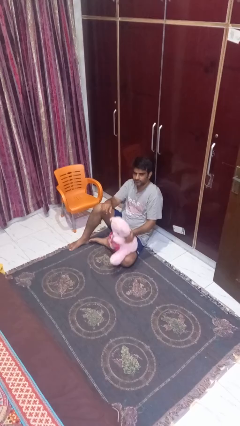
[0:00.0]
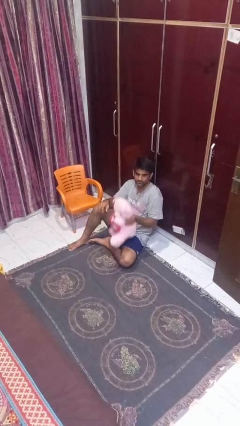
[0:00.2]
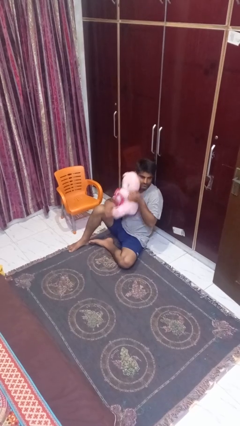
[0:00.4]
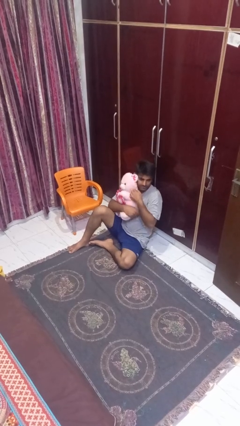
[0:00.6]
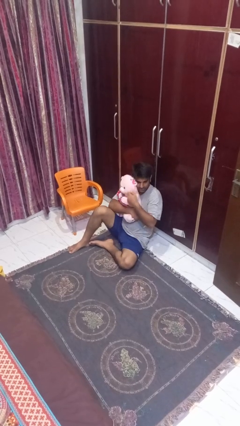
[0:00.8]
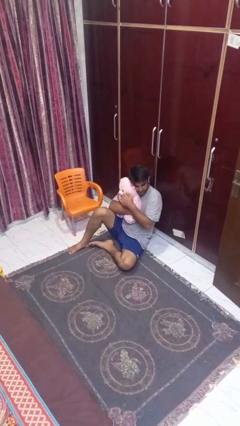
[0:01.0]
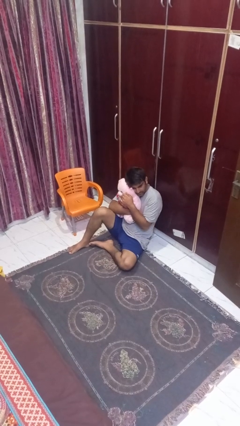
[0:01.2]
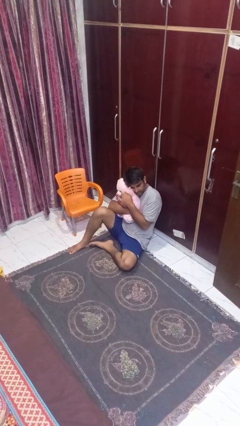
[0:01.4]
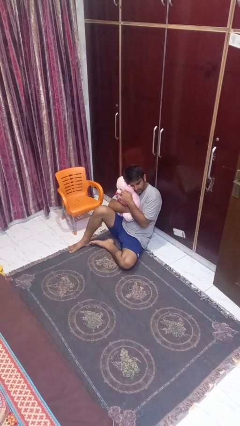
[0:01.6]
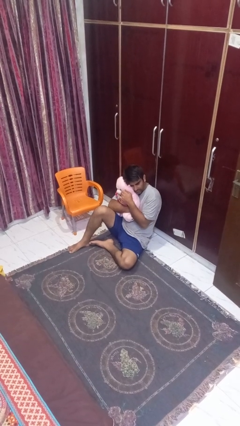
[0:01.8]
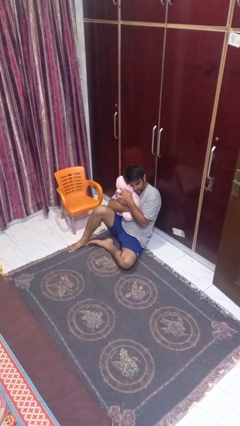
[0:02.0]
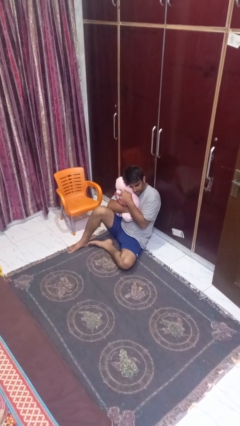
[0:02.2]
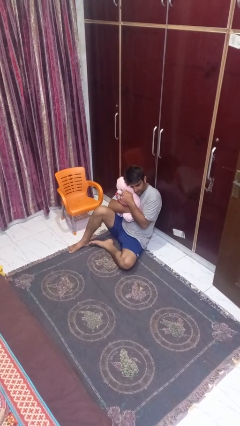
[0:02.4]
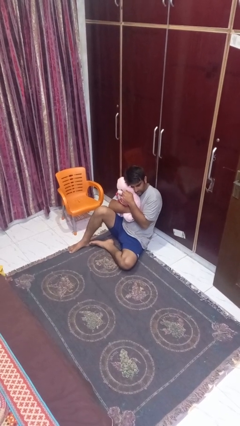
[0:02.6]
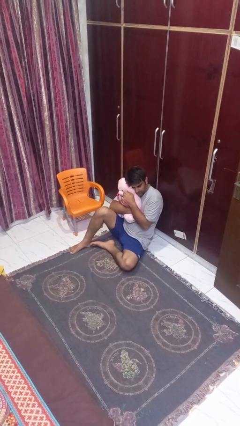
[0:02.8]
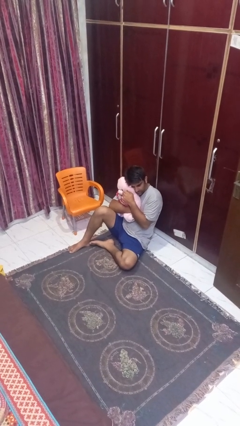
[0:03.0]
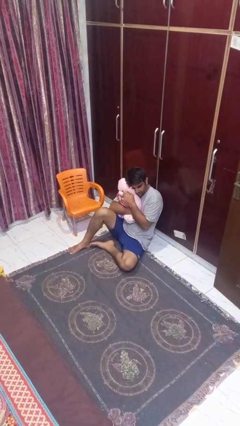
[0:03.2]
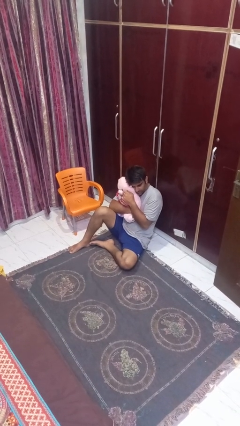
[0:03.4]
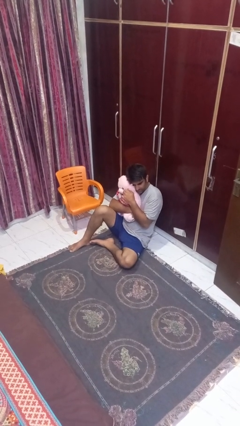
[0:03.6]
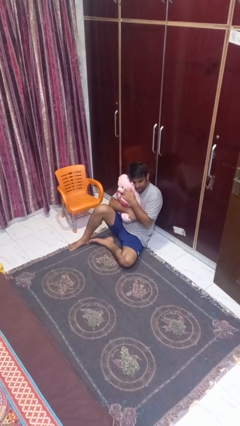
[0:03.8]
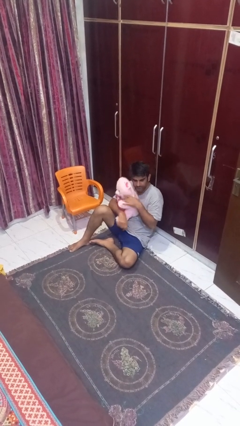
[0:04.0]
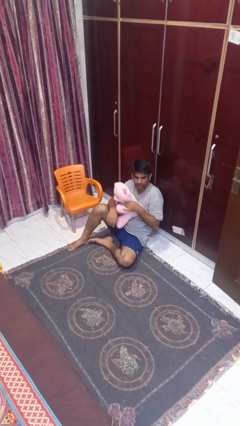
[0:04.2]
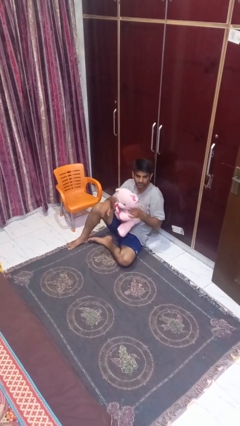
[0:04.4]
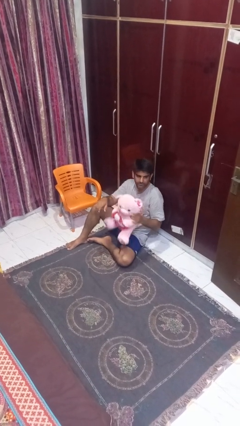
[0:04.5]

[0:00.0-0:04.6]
person hugs stuffed animal

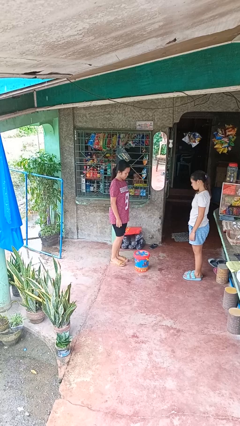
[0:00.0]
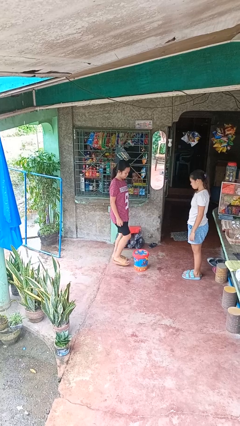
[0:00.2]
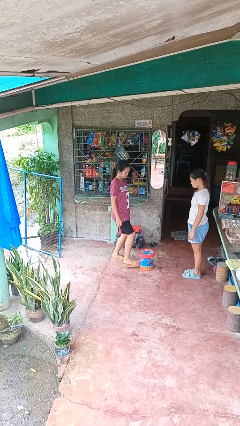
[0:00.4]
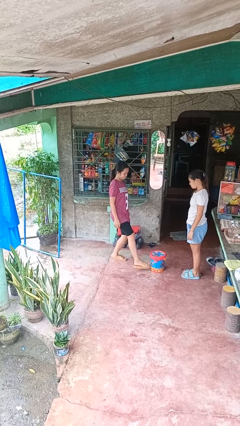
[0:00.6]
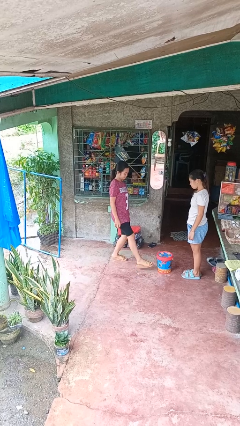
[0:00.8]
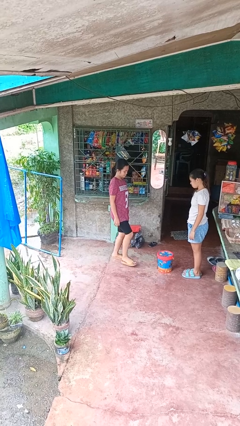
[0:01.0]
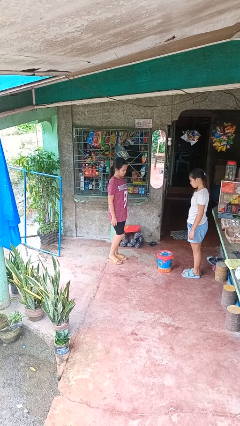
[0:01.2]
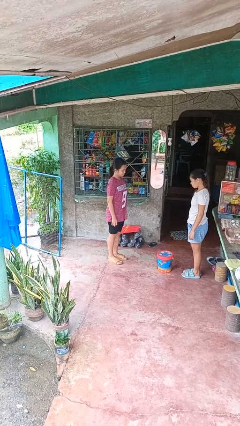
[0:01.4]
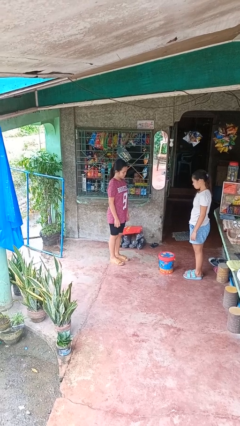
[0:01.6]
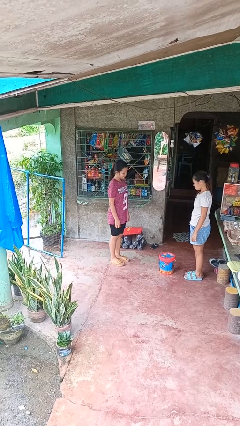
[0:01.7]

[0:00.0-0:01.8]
person kicks object to person

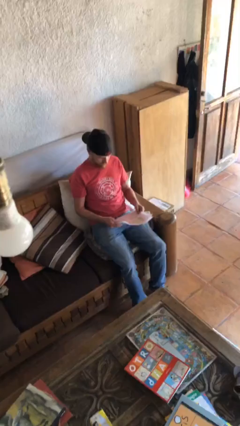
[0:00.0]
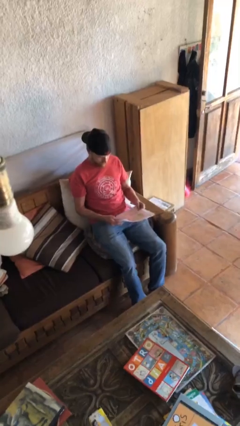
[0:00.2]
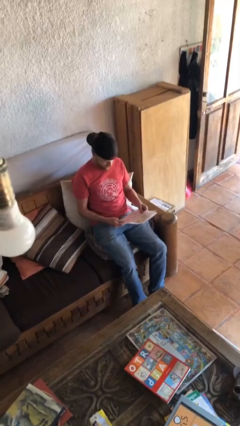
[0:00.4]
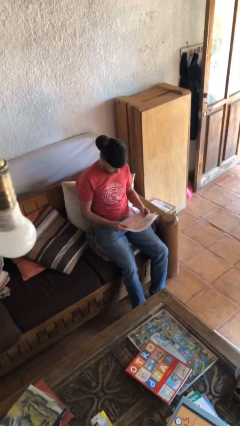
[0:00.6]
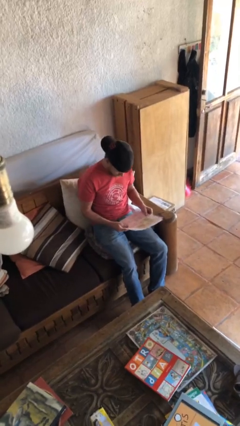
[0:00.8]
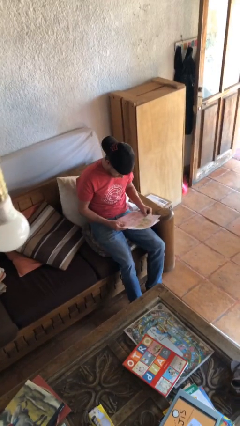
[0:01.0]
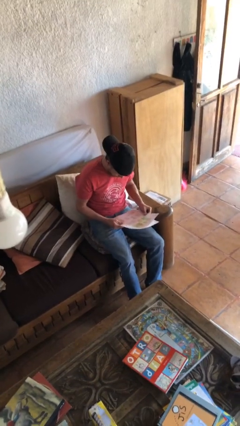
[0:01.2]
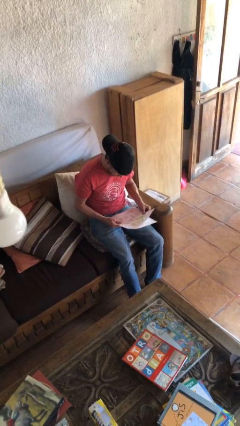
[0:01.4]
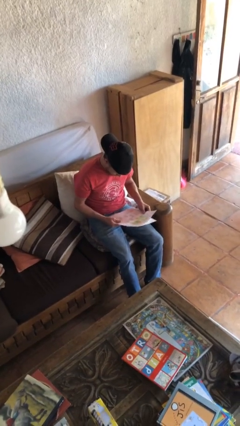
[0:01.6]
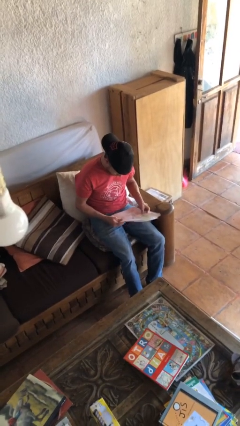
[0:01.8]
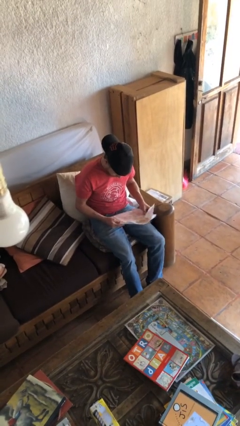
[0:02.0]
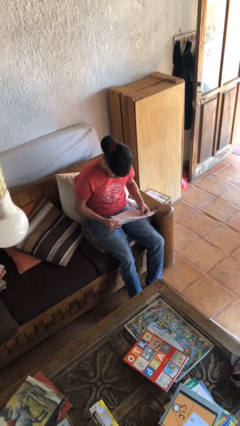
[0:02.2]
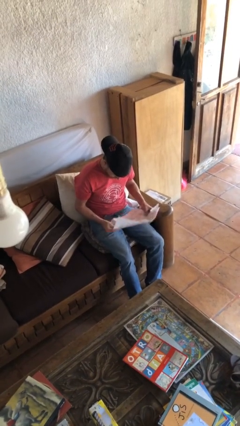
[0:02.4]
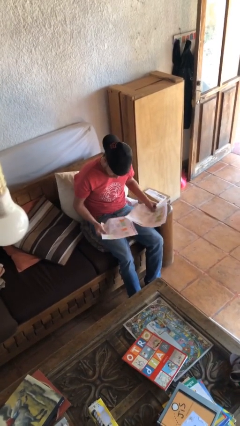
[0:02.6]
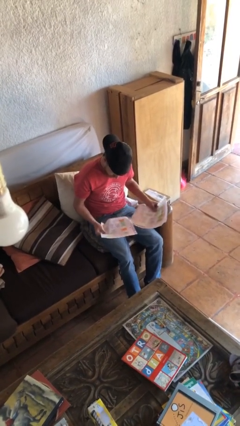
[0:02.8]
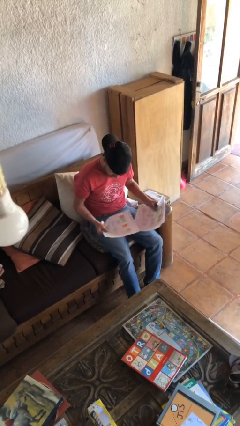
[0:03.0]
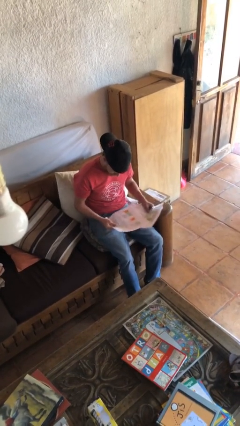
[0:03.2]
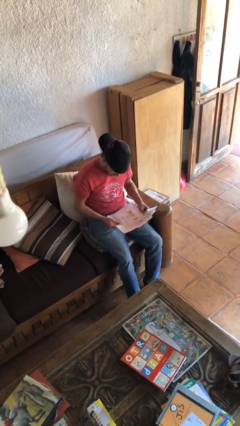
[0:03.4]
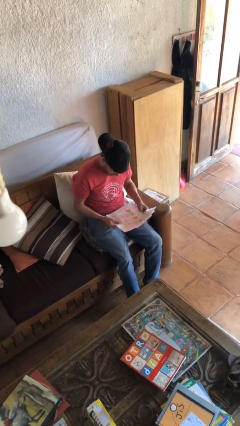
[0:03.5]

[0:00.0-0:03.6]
person reads document

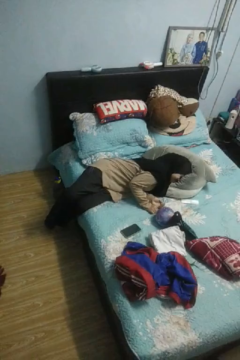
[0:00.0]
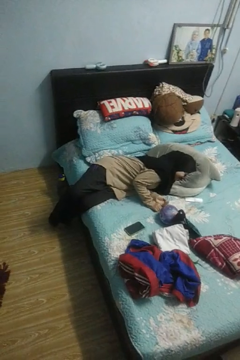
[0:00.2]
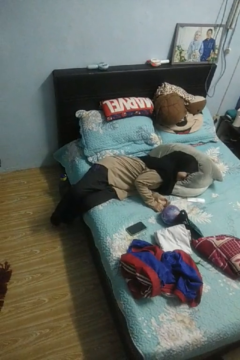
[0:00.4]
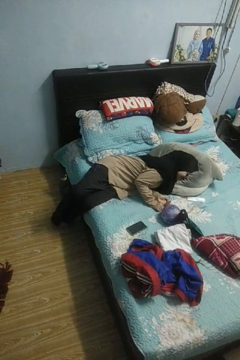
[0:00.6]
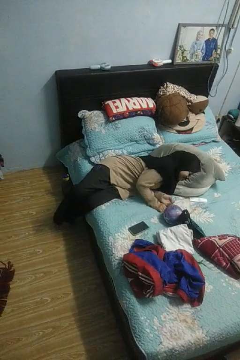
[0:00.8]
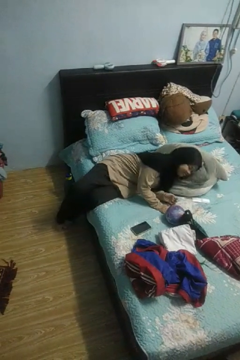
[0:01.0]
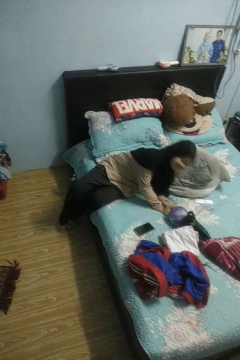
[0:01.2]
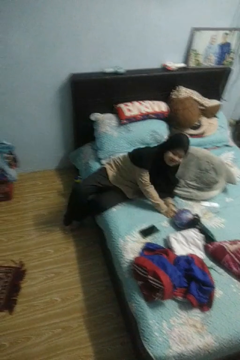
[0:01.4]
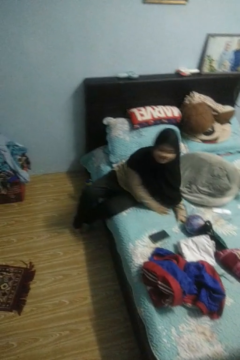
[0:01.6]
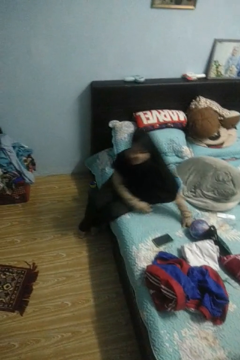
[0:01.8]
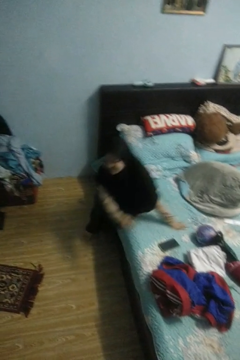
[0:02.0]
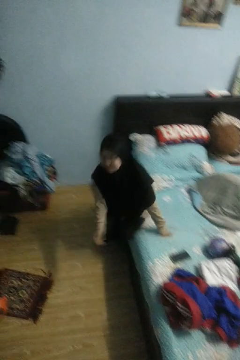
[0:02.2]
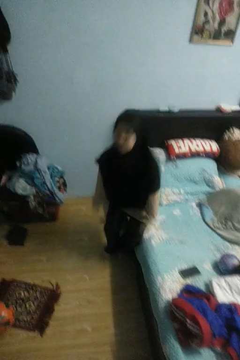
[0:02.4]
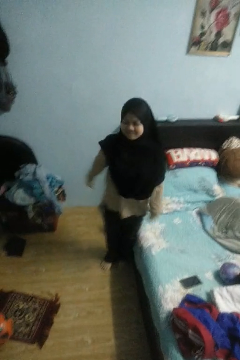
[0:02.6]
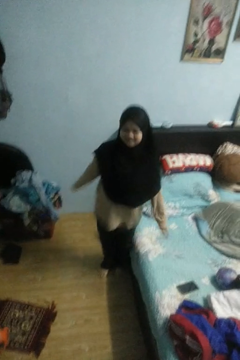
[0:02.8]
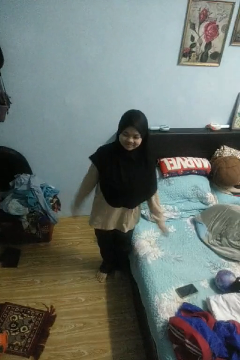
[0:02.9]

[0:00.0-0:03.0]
person stands up

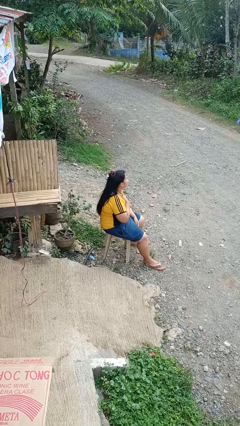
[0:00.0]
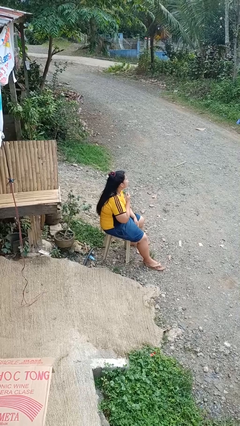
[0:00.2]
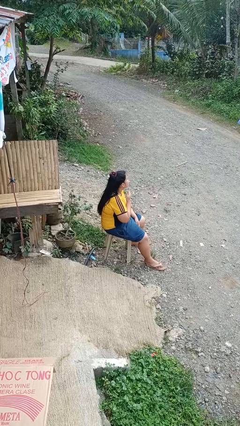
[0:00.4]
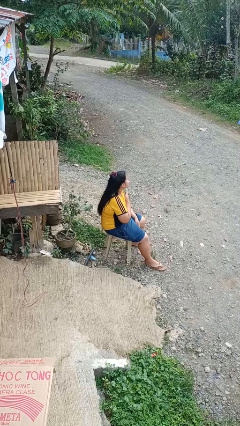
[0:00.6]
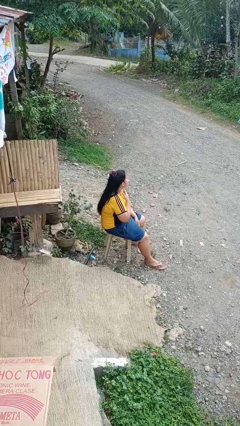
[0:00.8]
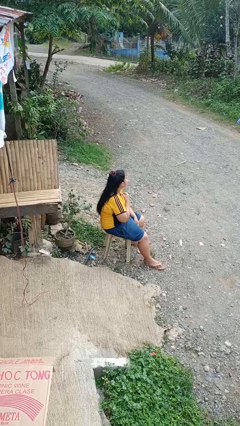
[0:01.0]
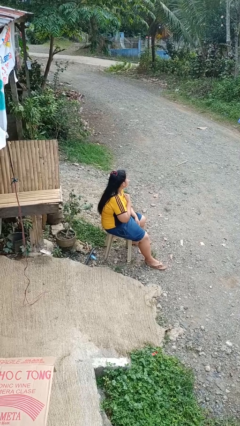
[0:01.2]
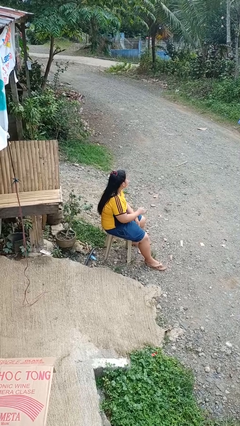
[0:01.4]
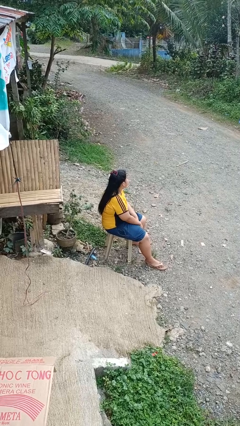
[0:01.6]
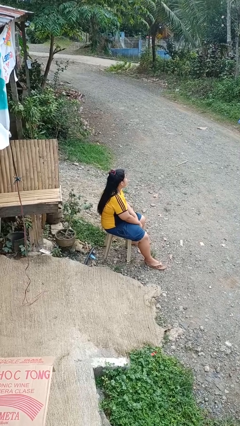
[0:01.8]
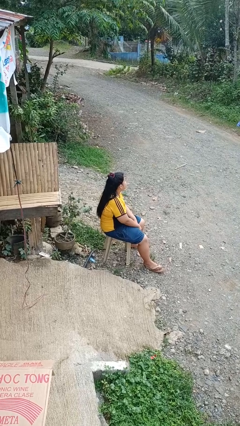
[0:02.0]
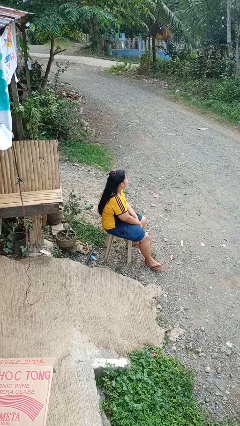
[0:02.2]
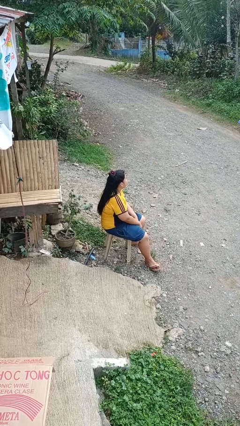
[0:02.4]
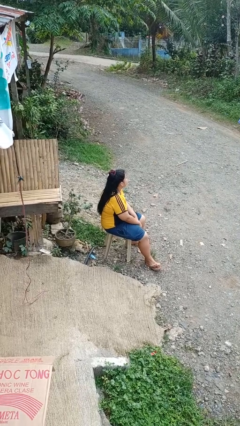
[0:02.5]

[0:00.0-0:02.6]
person drums on chest

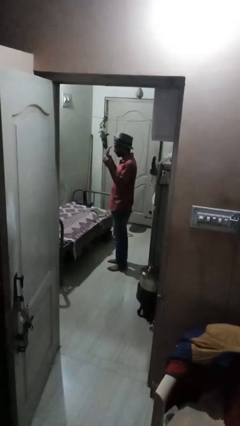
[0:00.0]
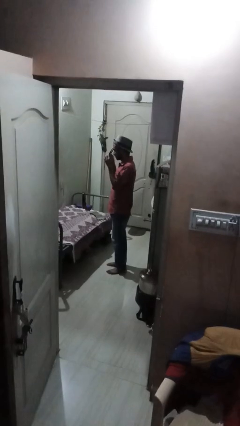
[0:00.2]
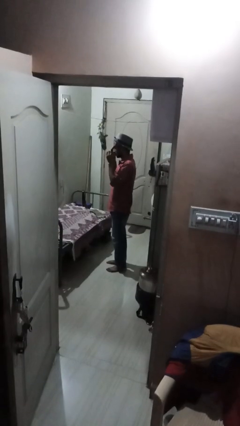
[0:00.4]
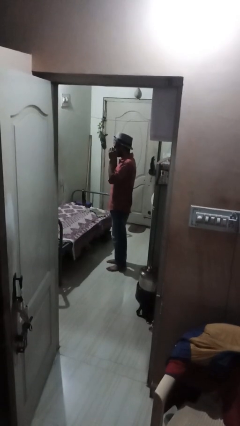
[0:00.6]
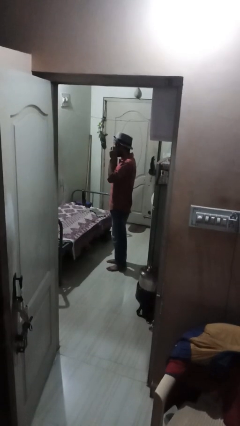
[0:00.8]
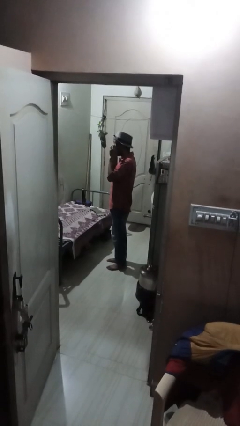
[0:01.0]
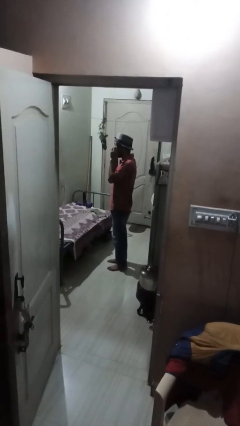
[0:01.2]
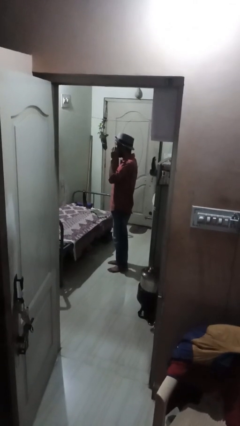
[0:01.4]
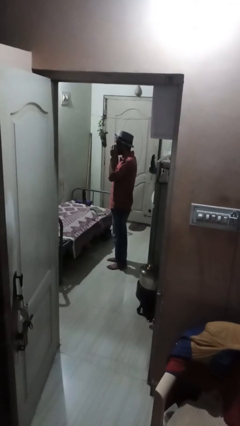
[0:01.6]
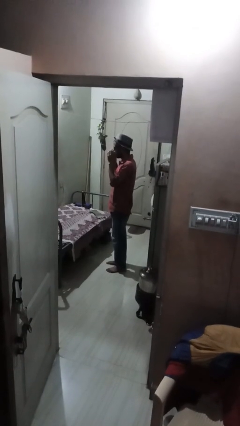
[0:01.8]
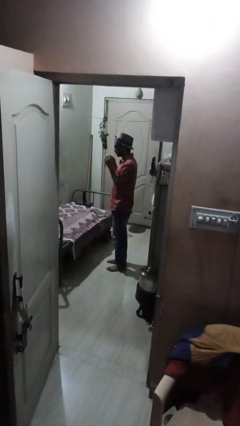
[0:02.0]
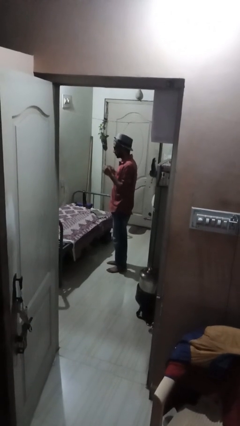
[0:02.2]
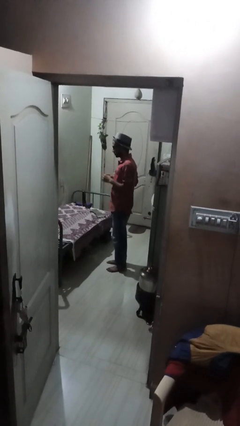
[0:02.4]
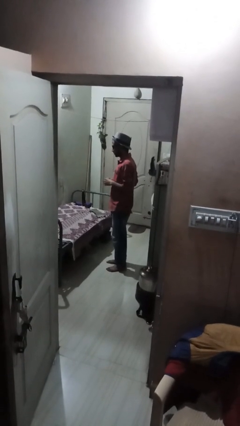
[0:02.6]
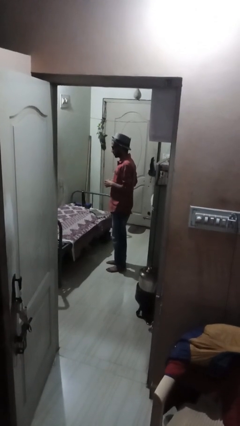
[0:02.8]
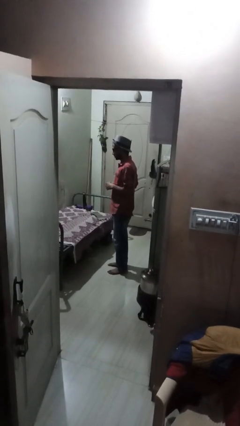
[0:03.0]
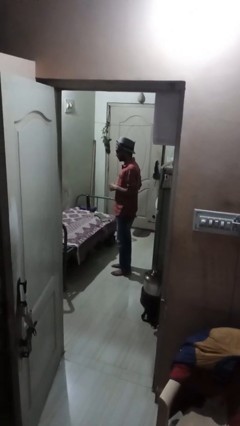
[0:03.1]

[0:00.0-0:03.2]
person puts on glasses
